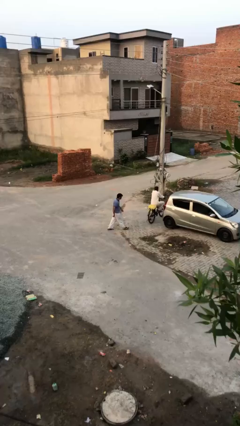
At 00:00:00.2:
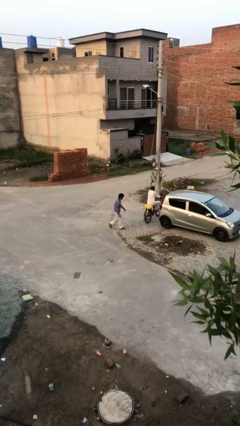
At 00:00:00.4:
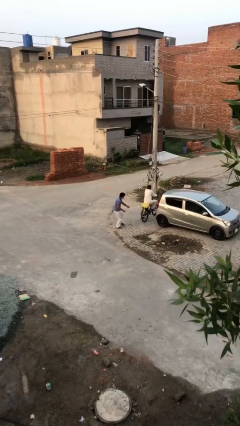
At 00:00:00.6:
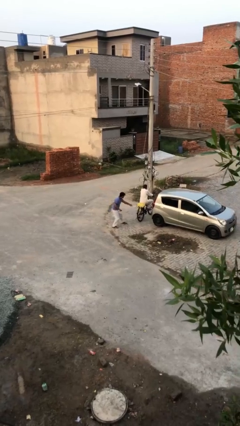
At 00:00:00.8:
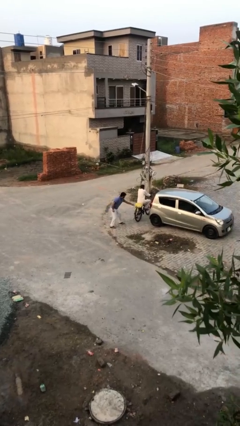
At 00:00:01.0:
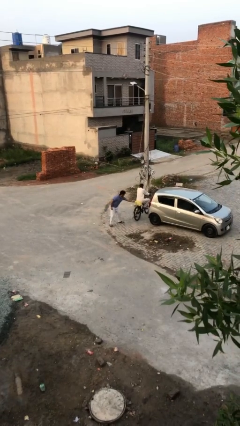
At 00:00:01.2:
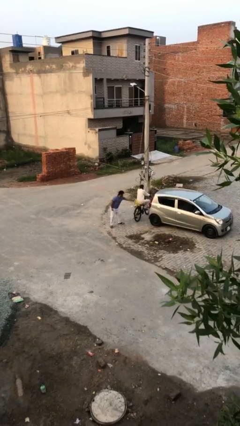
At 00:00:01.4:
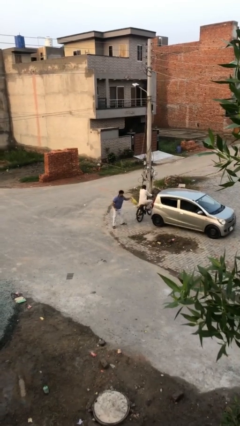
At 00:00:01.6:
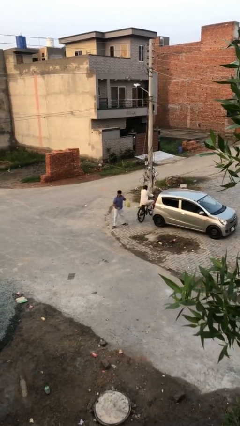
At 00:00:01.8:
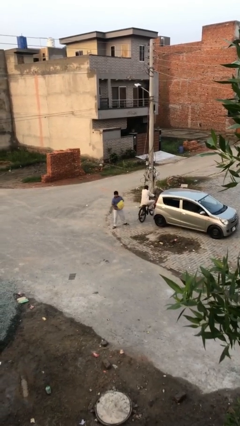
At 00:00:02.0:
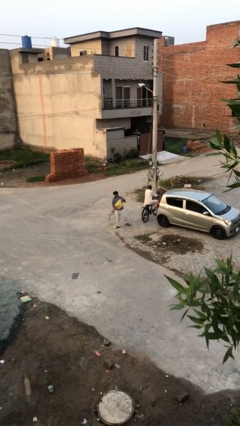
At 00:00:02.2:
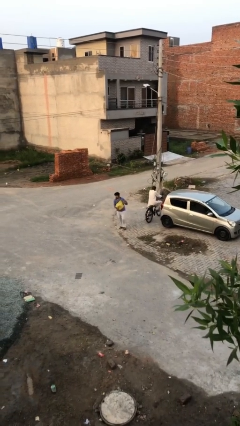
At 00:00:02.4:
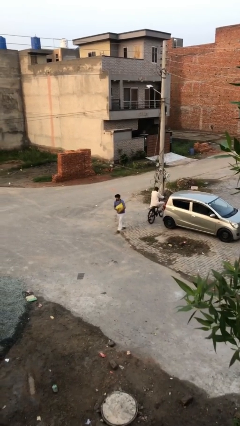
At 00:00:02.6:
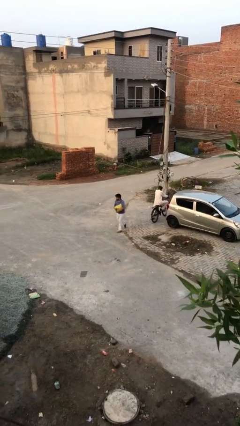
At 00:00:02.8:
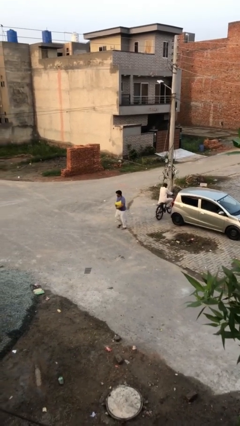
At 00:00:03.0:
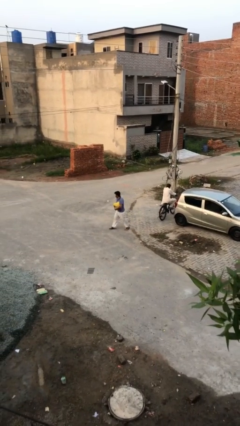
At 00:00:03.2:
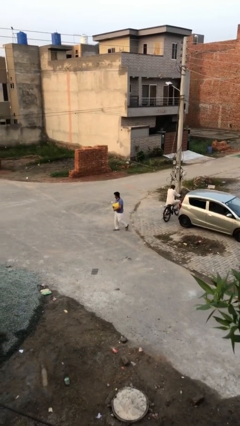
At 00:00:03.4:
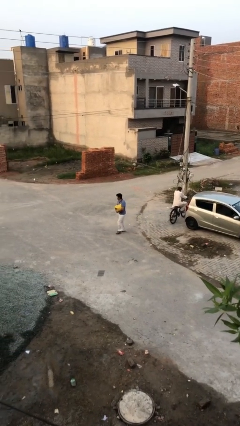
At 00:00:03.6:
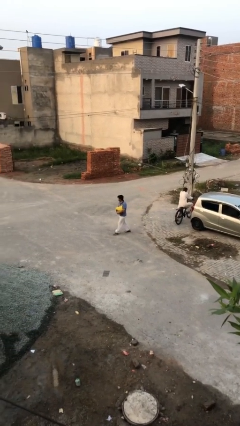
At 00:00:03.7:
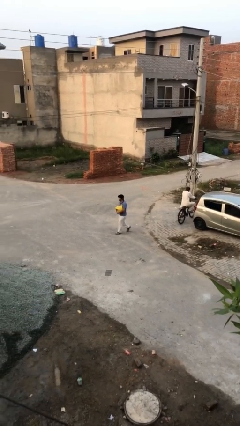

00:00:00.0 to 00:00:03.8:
person steals object from person

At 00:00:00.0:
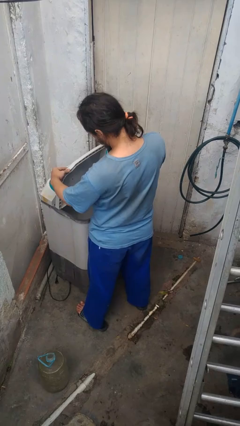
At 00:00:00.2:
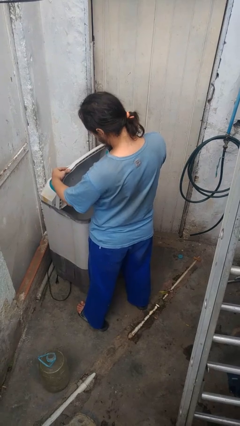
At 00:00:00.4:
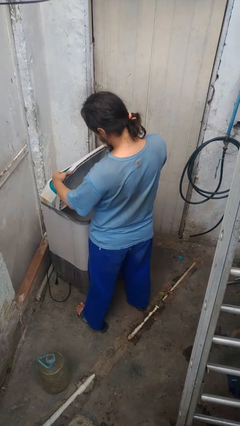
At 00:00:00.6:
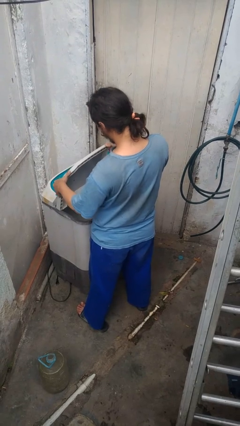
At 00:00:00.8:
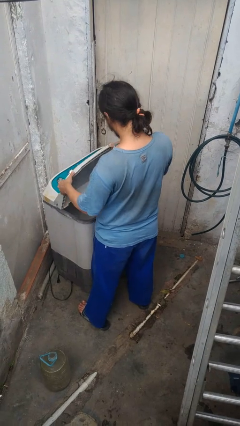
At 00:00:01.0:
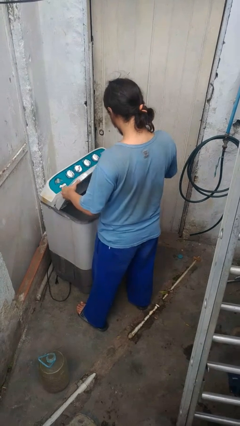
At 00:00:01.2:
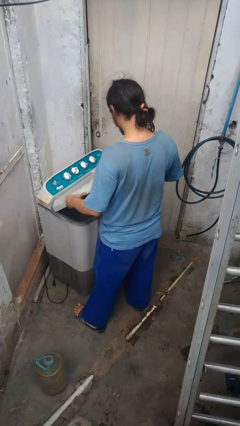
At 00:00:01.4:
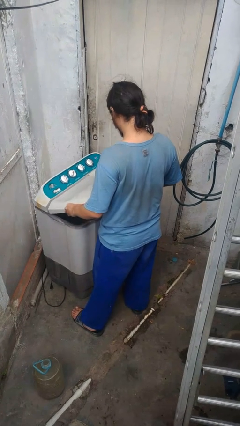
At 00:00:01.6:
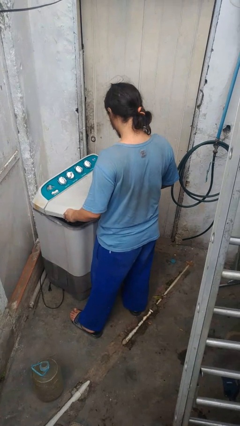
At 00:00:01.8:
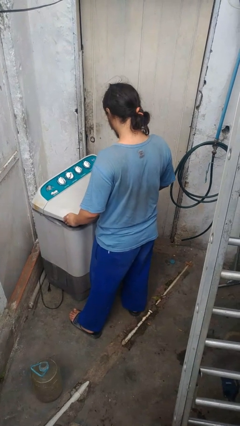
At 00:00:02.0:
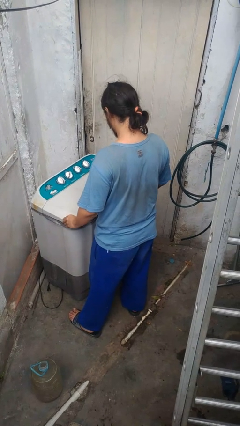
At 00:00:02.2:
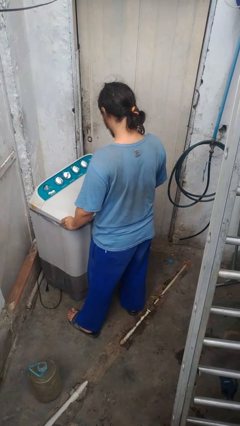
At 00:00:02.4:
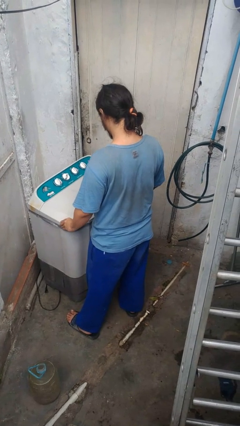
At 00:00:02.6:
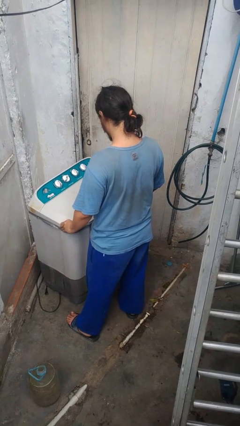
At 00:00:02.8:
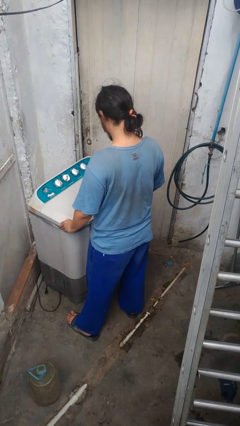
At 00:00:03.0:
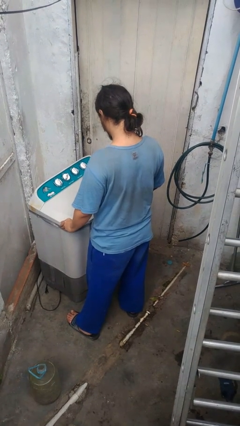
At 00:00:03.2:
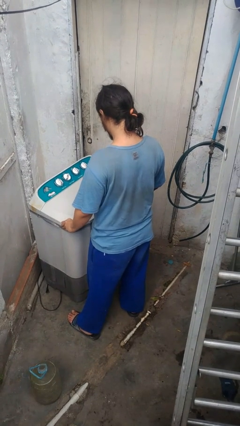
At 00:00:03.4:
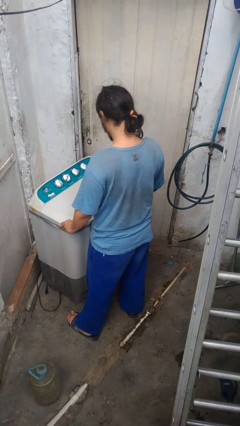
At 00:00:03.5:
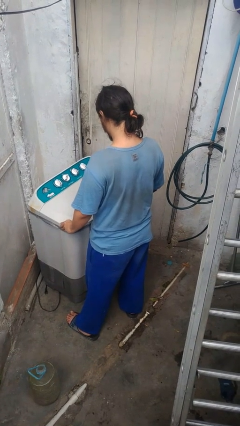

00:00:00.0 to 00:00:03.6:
person closes clothes washer

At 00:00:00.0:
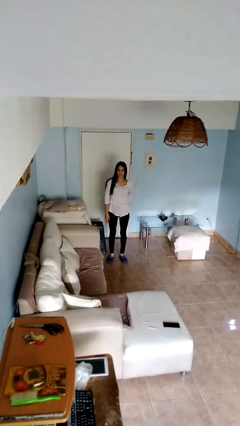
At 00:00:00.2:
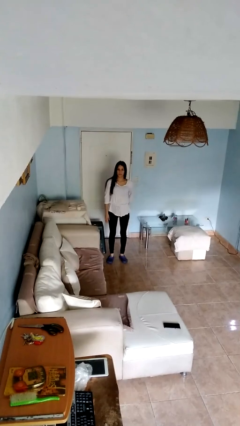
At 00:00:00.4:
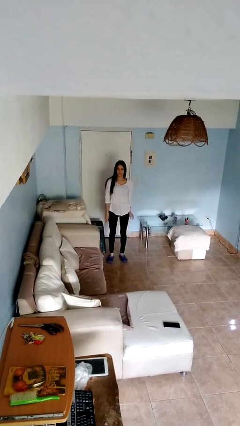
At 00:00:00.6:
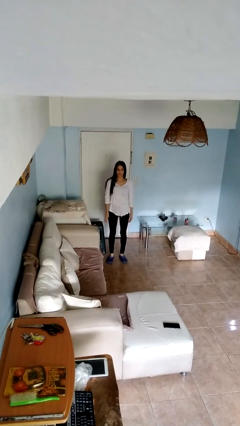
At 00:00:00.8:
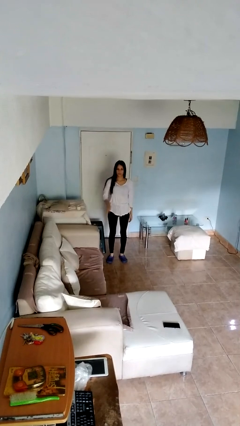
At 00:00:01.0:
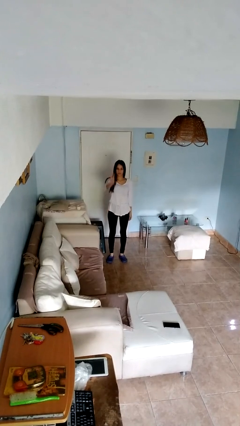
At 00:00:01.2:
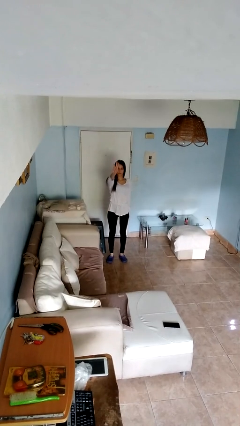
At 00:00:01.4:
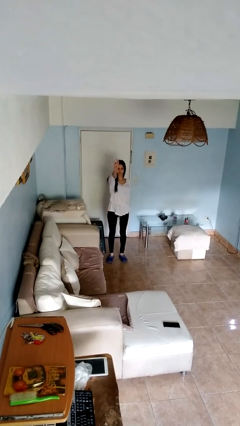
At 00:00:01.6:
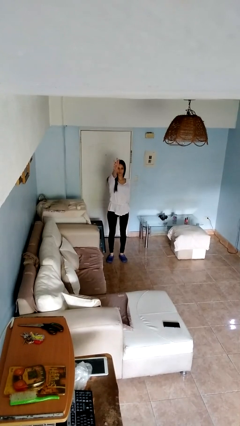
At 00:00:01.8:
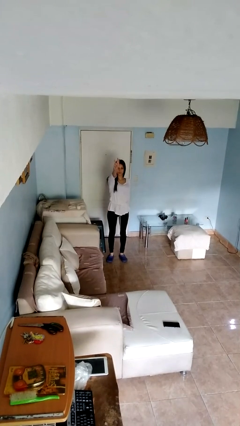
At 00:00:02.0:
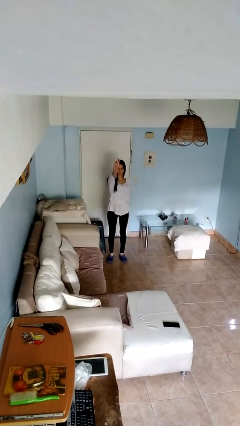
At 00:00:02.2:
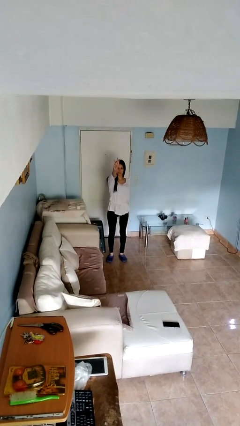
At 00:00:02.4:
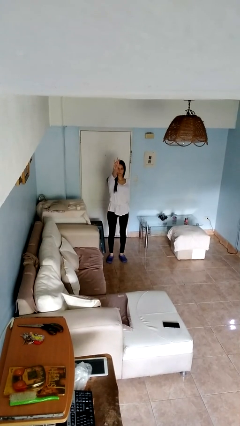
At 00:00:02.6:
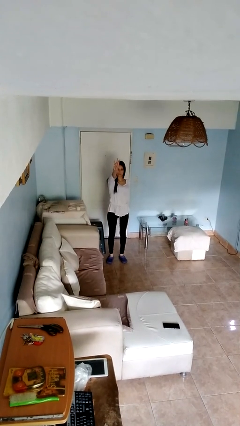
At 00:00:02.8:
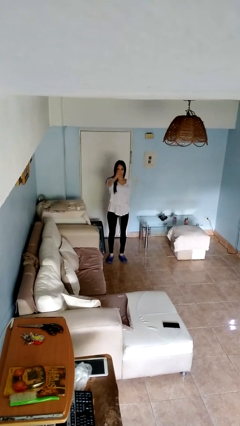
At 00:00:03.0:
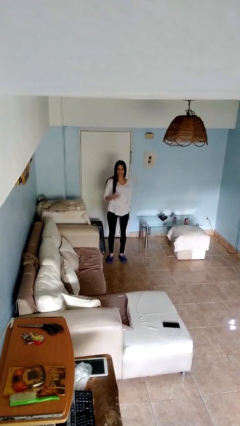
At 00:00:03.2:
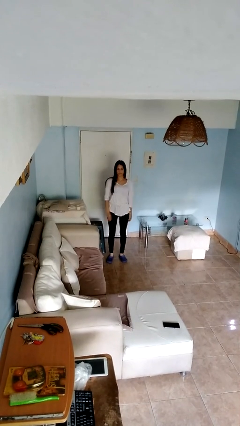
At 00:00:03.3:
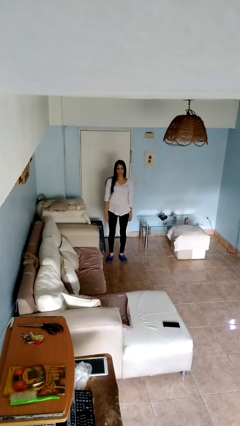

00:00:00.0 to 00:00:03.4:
person gestures number three

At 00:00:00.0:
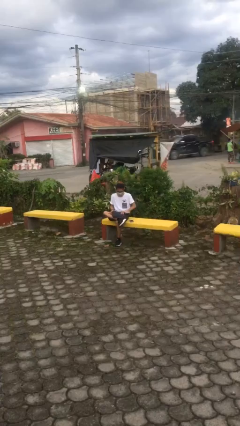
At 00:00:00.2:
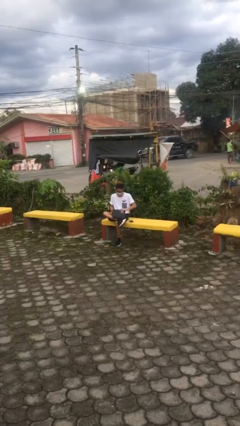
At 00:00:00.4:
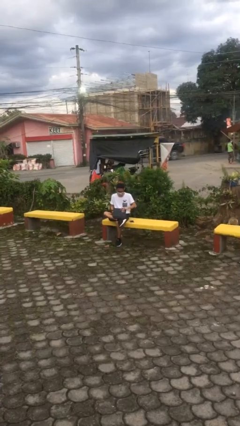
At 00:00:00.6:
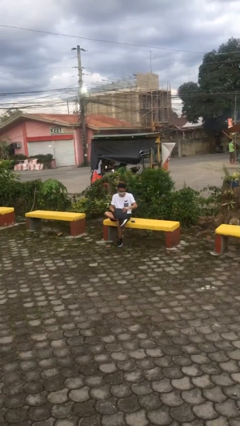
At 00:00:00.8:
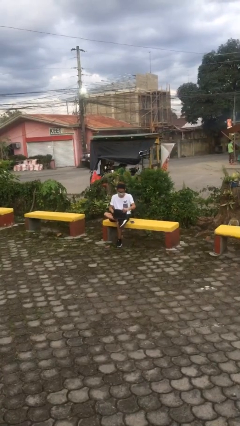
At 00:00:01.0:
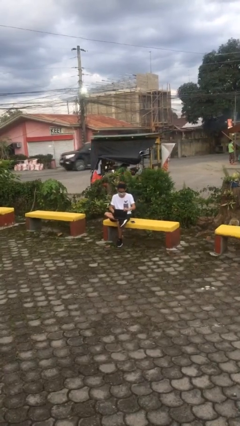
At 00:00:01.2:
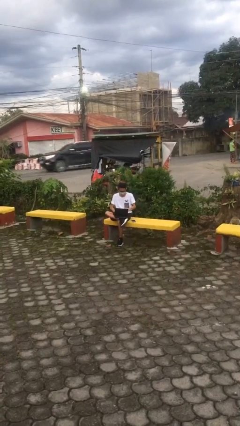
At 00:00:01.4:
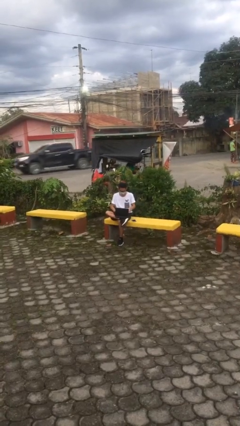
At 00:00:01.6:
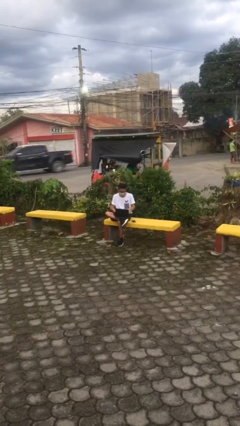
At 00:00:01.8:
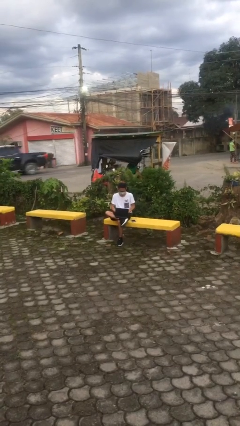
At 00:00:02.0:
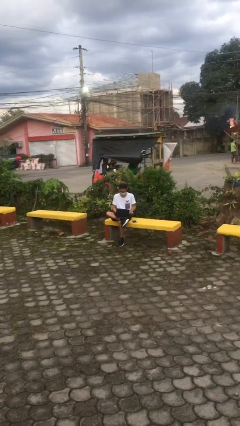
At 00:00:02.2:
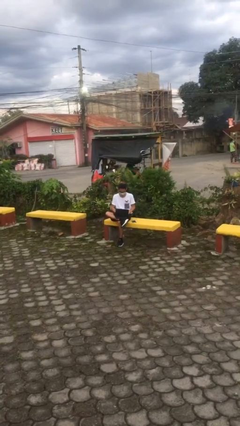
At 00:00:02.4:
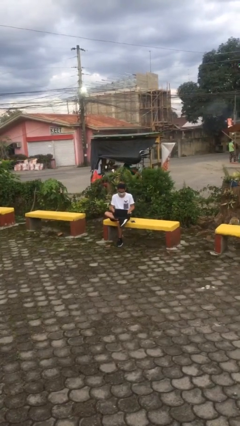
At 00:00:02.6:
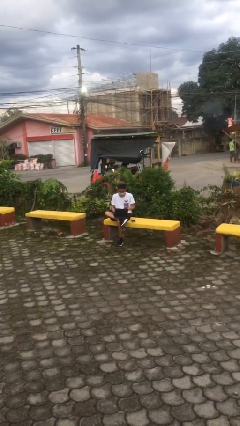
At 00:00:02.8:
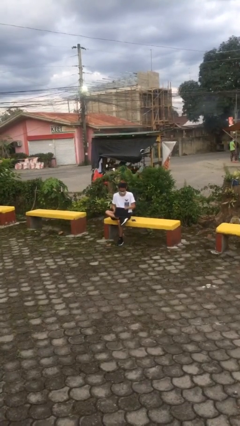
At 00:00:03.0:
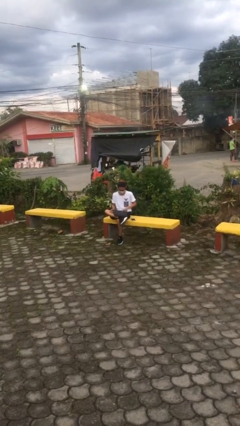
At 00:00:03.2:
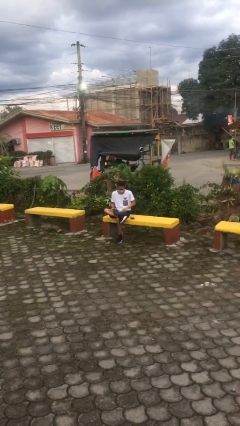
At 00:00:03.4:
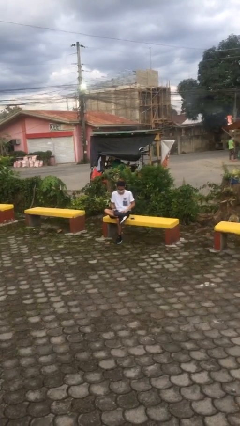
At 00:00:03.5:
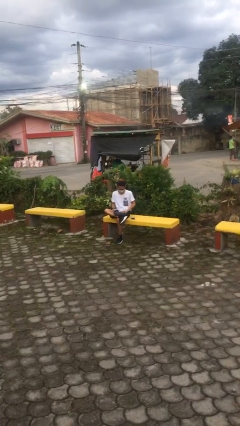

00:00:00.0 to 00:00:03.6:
person interacts with laptop

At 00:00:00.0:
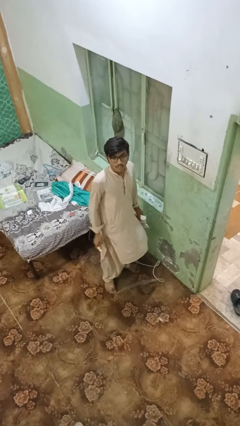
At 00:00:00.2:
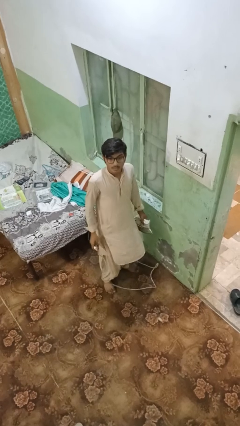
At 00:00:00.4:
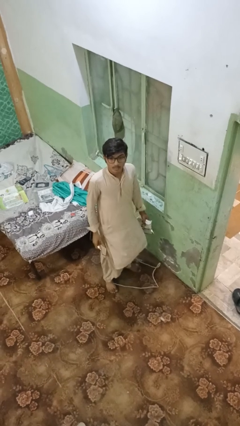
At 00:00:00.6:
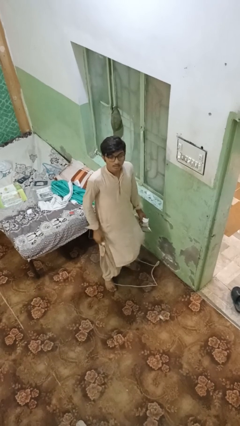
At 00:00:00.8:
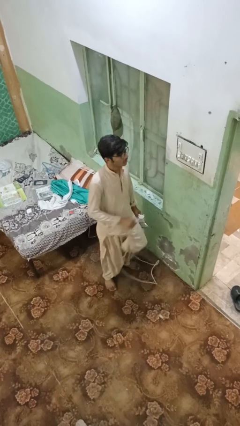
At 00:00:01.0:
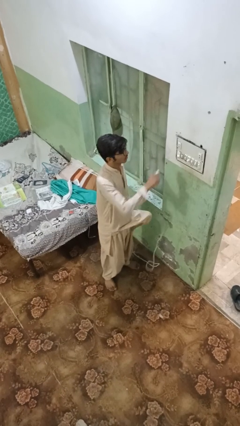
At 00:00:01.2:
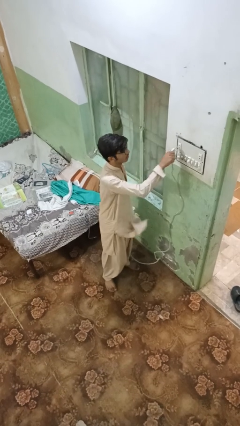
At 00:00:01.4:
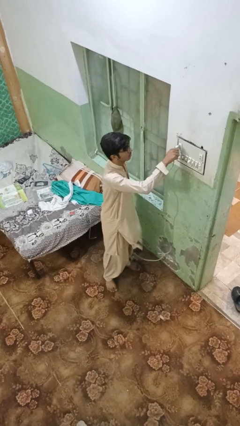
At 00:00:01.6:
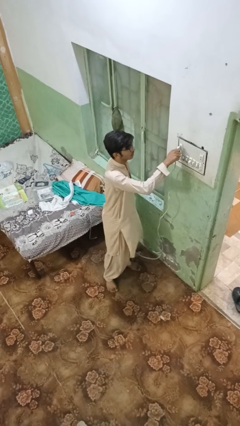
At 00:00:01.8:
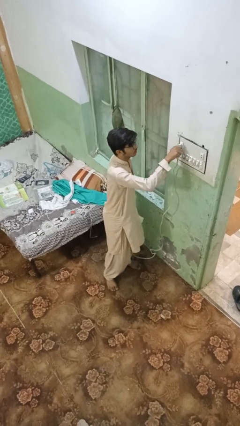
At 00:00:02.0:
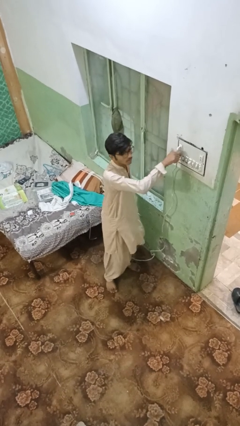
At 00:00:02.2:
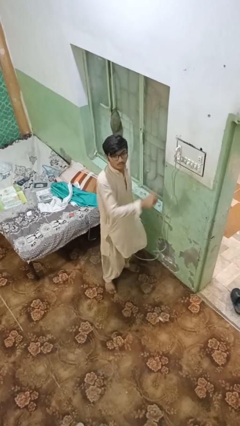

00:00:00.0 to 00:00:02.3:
person plugs into electrical socket

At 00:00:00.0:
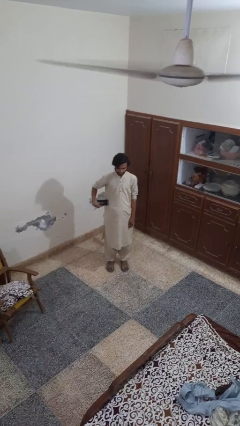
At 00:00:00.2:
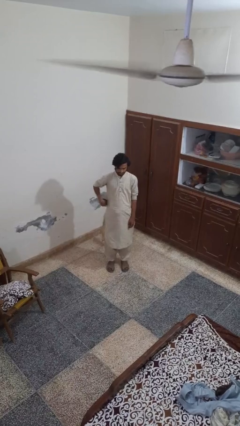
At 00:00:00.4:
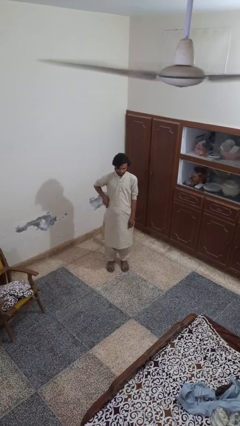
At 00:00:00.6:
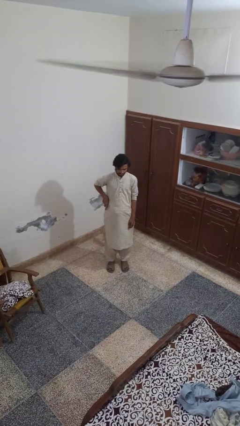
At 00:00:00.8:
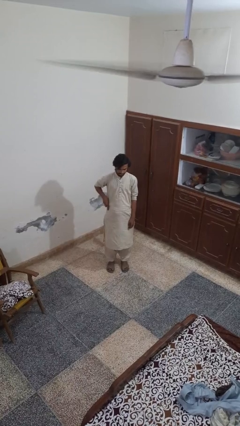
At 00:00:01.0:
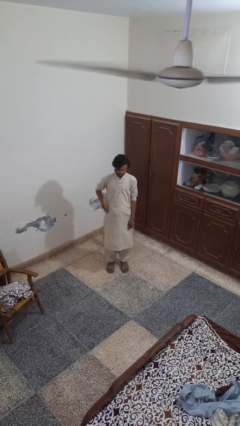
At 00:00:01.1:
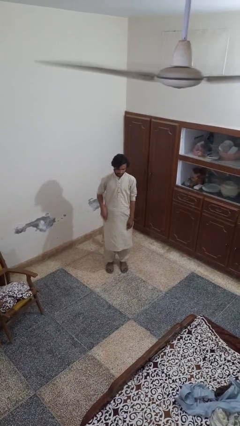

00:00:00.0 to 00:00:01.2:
person puts phone into pocket
